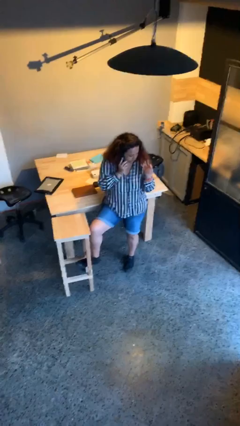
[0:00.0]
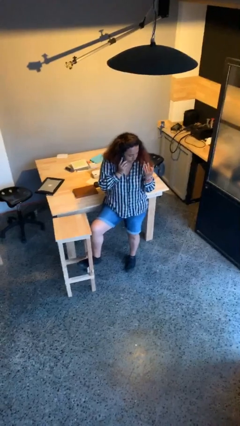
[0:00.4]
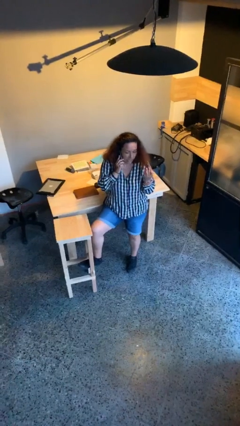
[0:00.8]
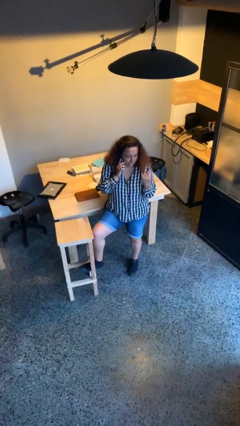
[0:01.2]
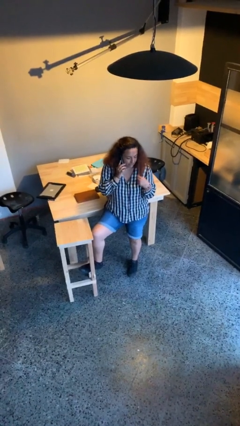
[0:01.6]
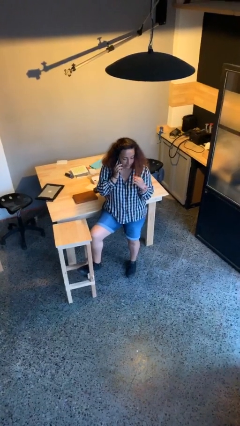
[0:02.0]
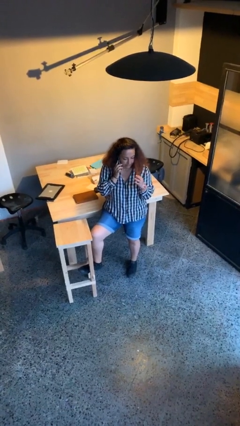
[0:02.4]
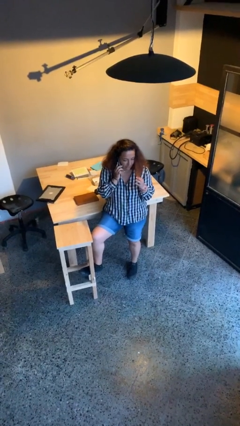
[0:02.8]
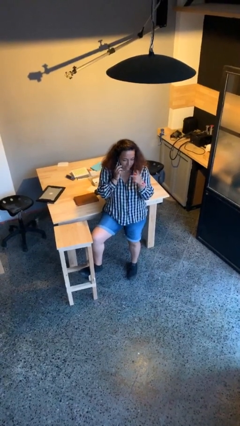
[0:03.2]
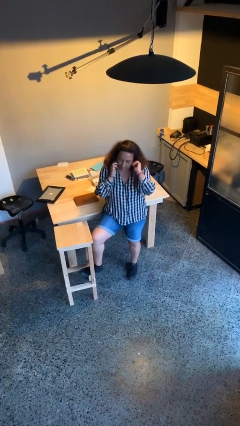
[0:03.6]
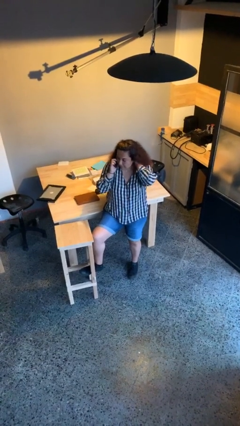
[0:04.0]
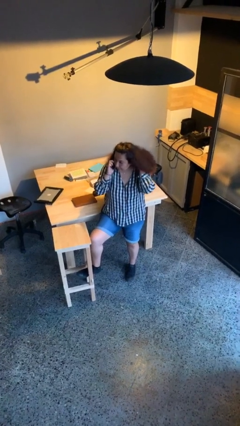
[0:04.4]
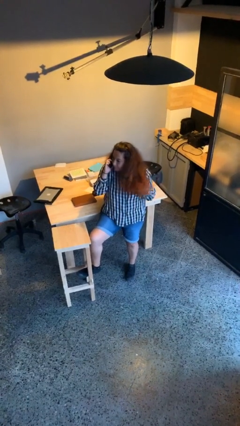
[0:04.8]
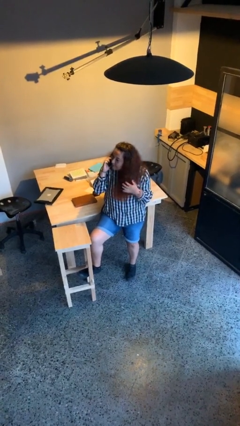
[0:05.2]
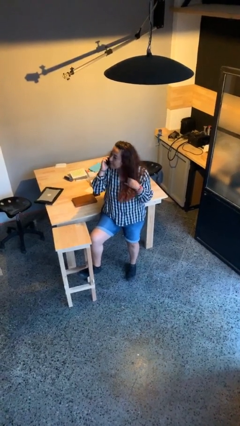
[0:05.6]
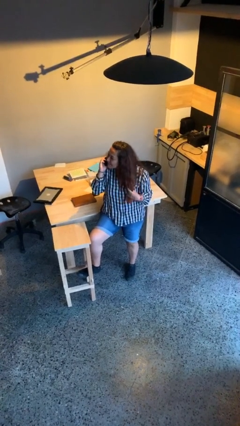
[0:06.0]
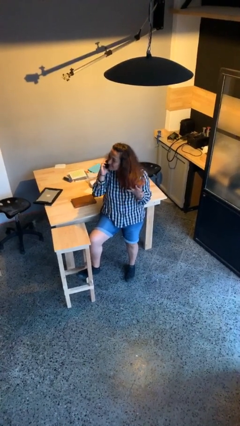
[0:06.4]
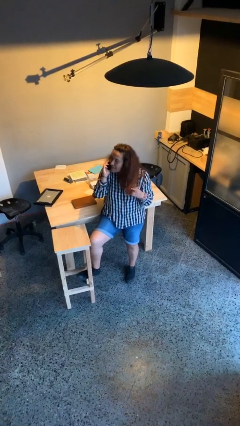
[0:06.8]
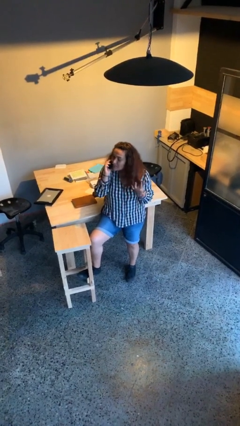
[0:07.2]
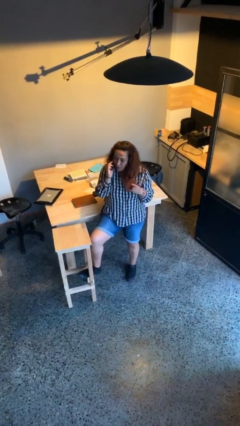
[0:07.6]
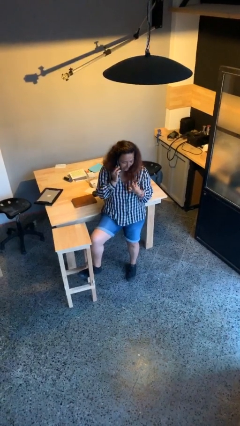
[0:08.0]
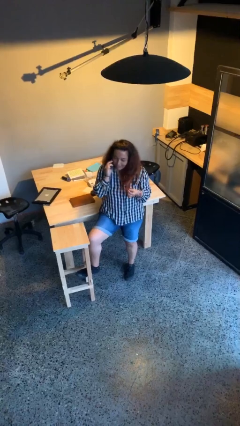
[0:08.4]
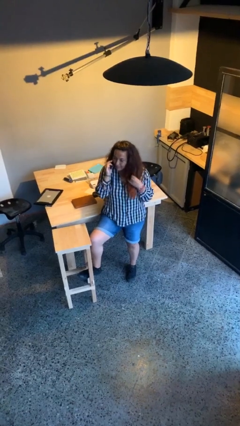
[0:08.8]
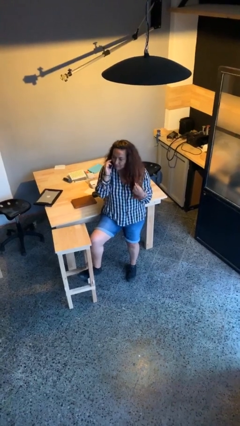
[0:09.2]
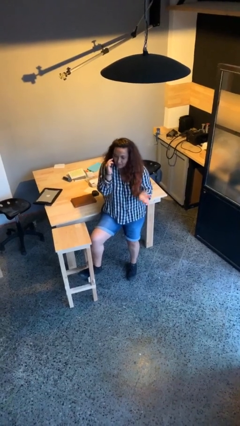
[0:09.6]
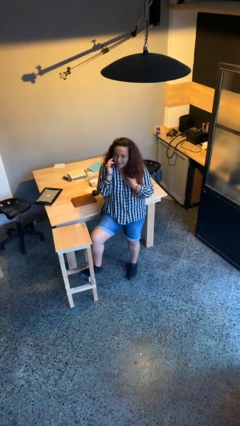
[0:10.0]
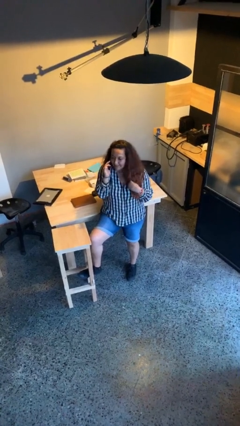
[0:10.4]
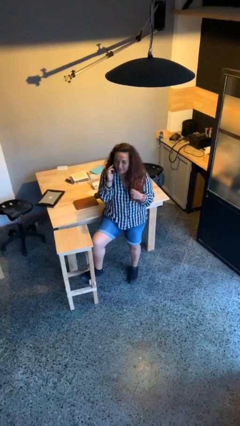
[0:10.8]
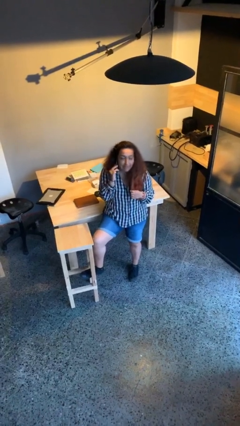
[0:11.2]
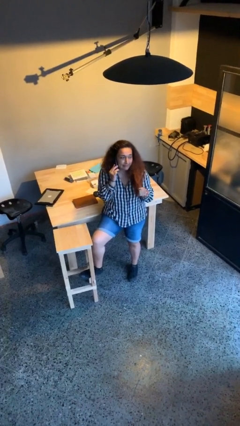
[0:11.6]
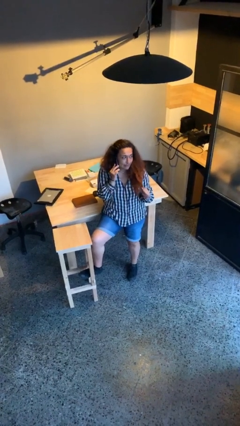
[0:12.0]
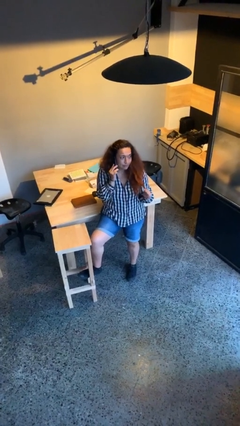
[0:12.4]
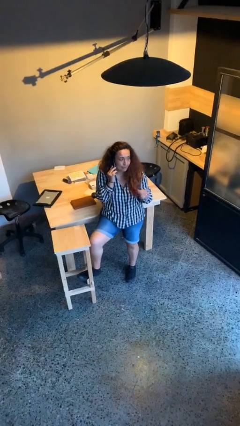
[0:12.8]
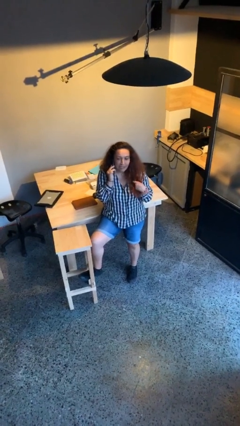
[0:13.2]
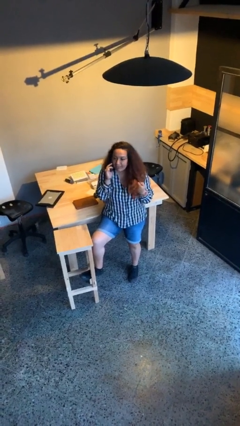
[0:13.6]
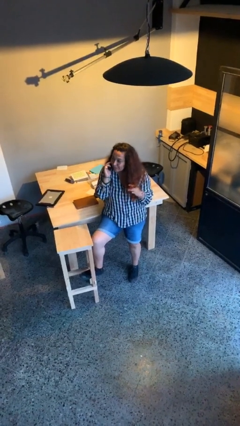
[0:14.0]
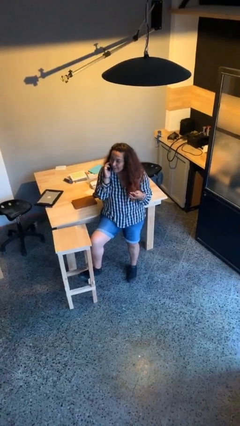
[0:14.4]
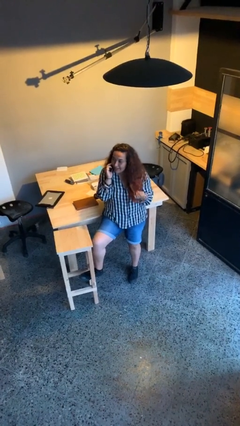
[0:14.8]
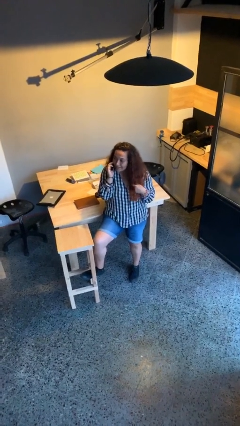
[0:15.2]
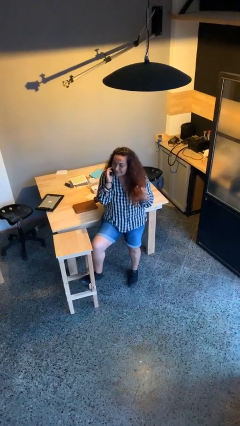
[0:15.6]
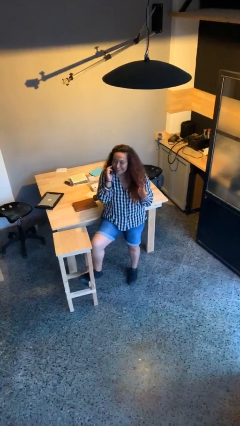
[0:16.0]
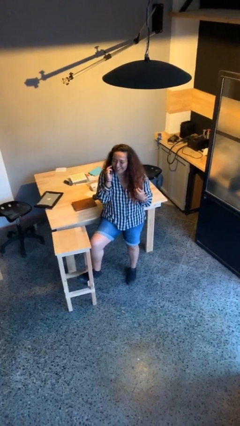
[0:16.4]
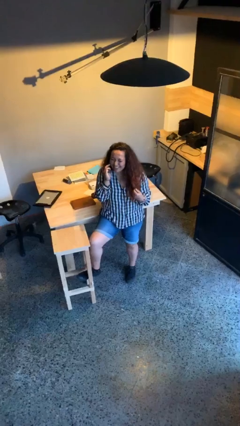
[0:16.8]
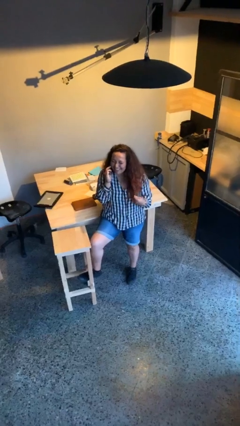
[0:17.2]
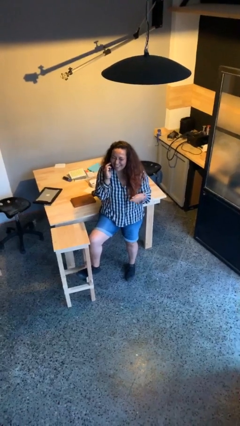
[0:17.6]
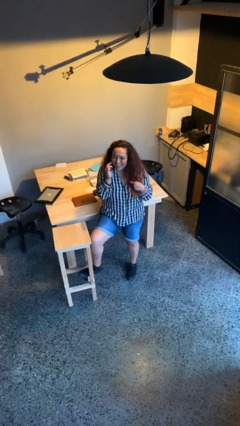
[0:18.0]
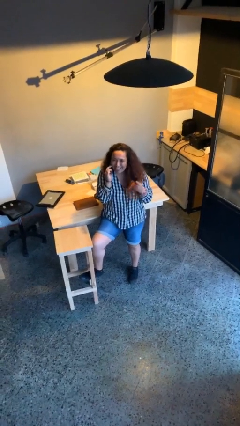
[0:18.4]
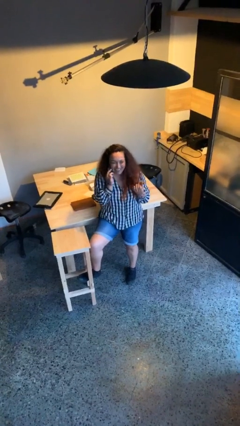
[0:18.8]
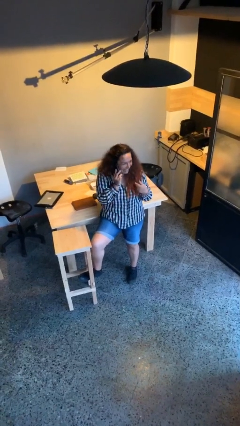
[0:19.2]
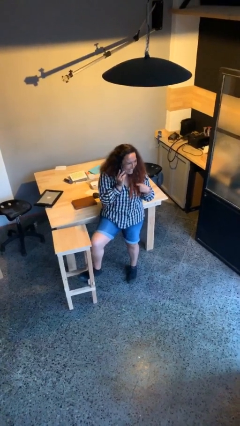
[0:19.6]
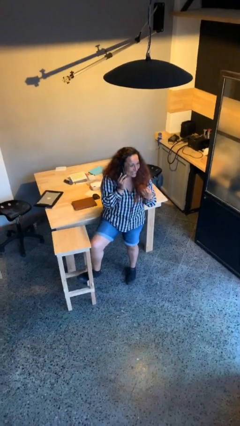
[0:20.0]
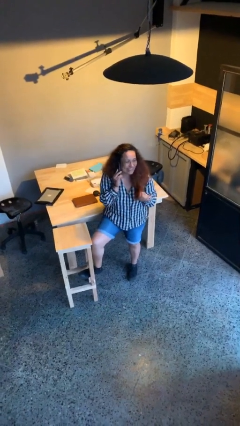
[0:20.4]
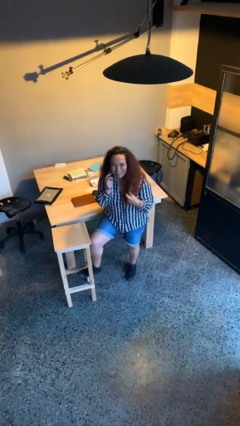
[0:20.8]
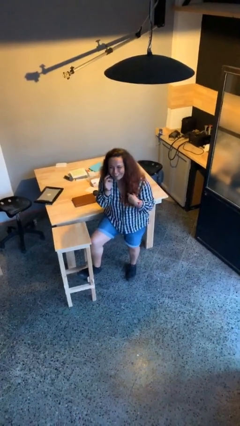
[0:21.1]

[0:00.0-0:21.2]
person talks on phone

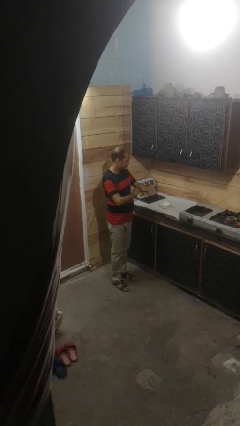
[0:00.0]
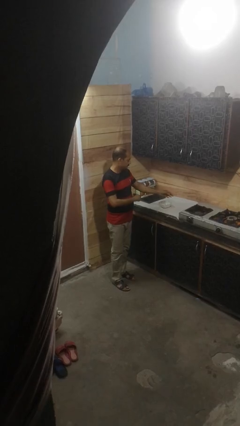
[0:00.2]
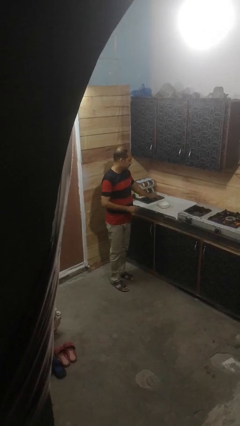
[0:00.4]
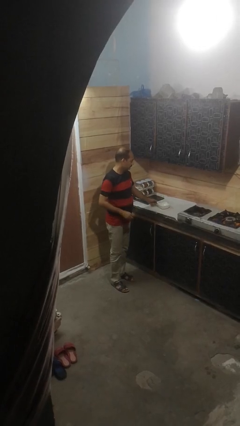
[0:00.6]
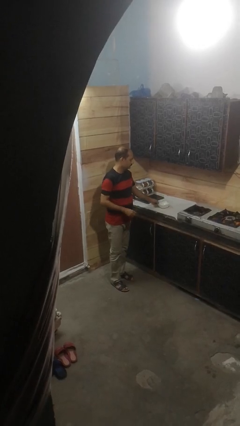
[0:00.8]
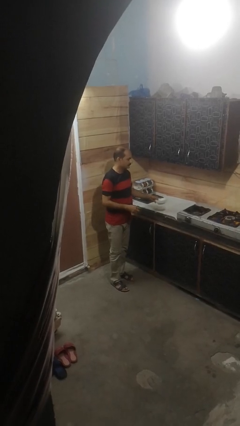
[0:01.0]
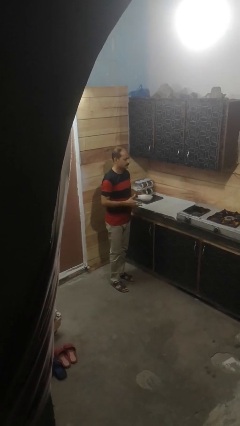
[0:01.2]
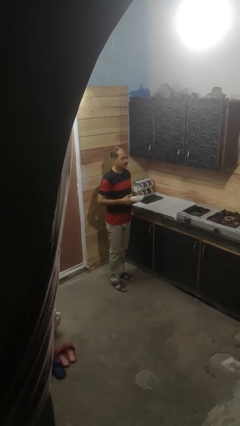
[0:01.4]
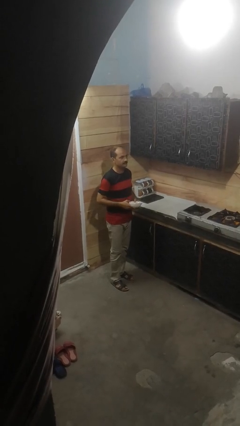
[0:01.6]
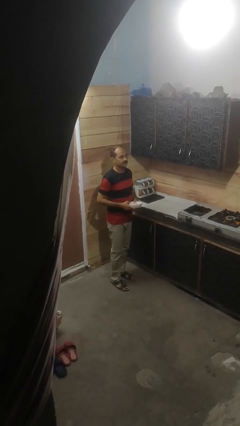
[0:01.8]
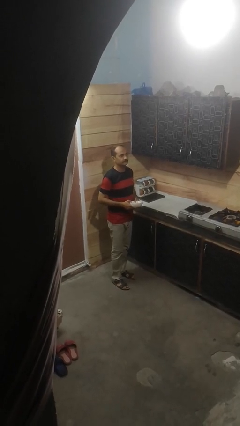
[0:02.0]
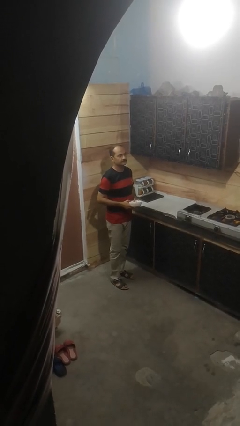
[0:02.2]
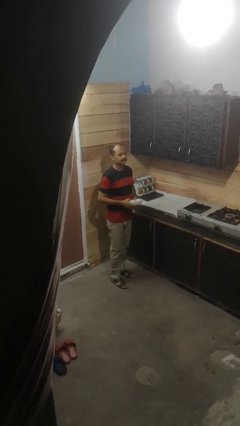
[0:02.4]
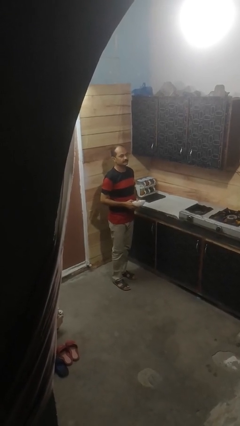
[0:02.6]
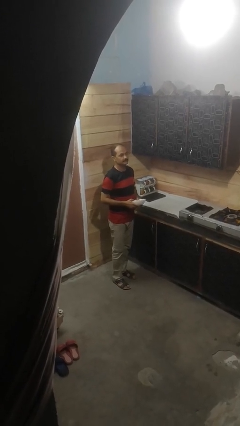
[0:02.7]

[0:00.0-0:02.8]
person picks up object from countertop

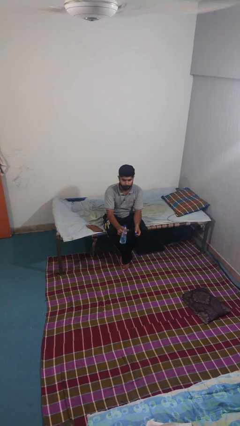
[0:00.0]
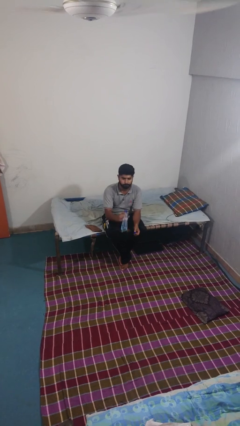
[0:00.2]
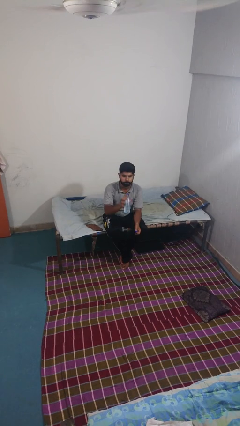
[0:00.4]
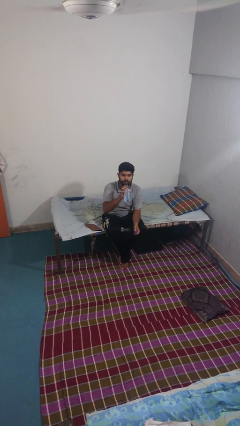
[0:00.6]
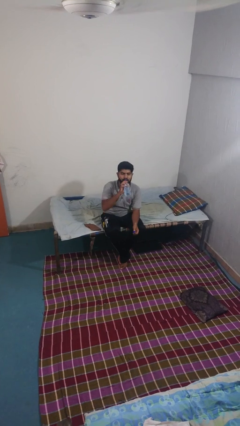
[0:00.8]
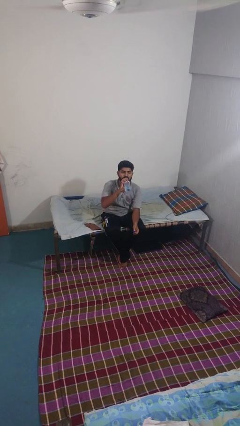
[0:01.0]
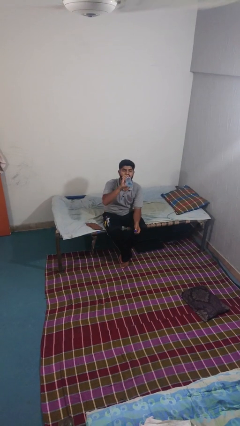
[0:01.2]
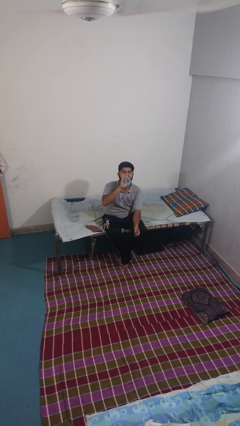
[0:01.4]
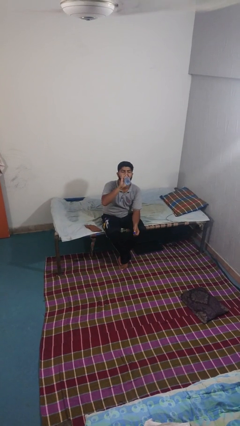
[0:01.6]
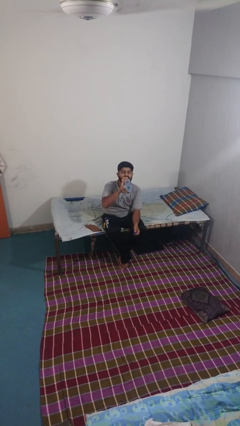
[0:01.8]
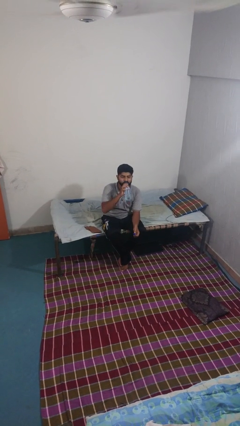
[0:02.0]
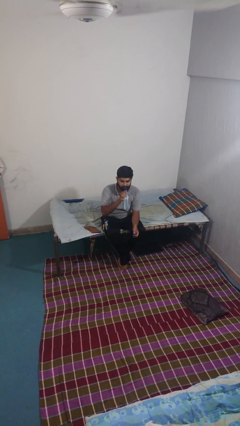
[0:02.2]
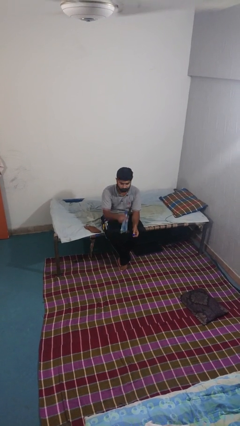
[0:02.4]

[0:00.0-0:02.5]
person drinks from bottle

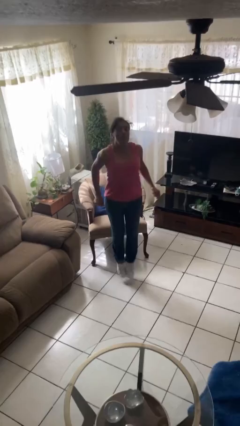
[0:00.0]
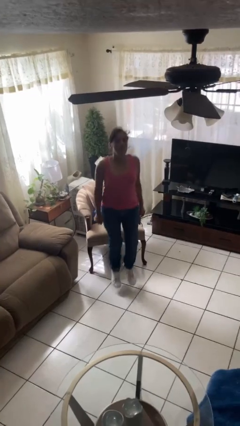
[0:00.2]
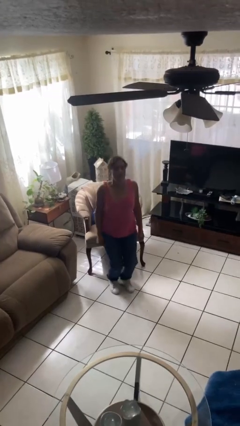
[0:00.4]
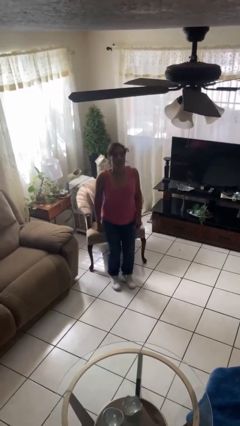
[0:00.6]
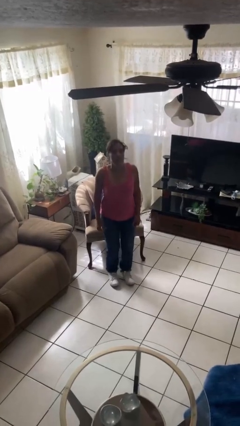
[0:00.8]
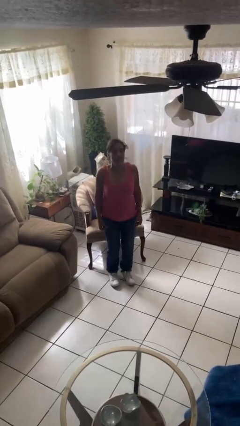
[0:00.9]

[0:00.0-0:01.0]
person jumps

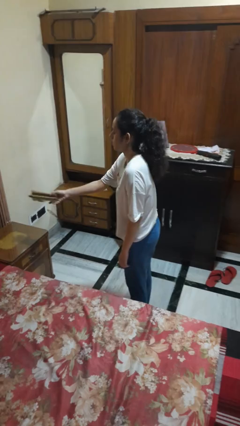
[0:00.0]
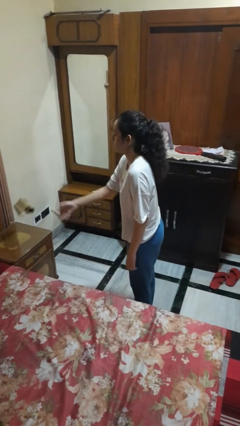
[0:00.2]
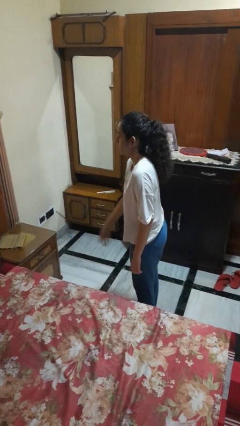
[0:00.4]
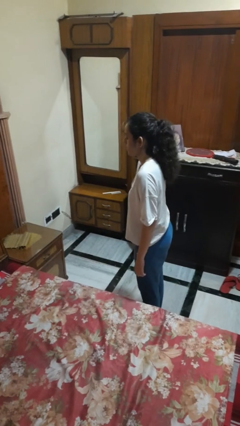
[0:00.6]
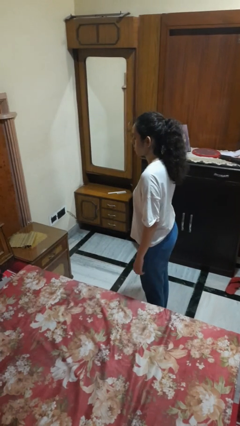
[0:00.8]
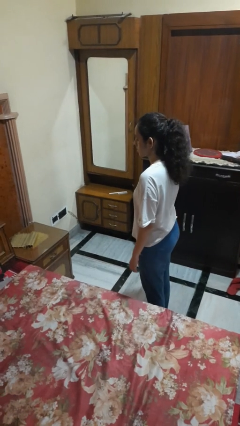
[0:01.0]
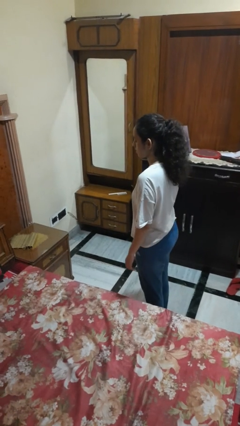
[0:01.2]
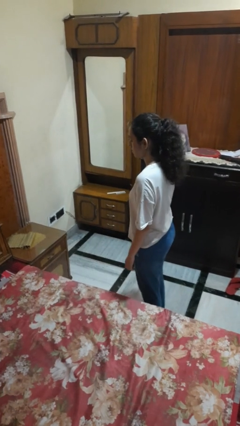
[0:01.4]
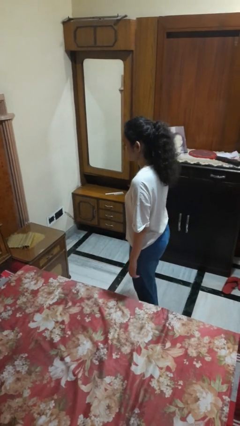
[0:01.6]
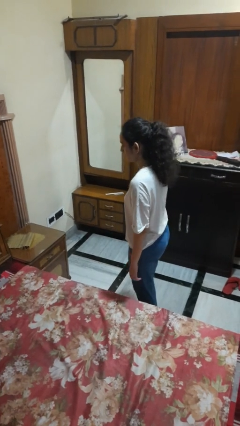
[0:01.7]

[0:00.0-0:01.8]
person throws object on table
